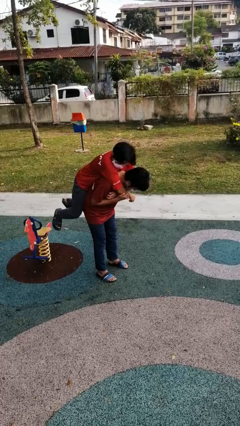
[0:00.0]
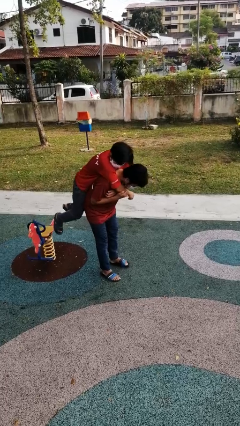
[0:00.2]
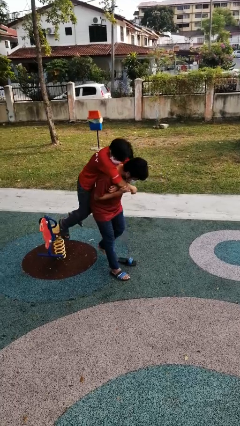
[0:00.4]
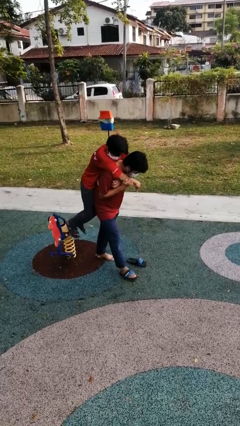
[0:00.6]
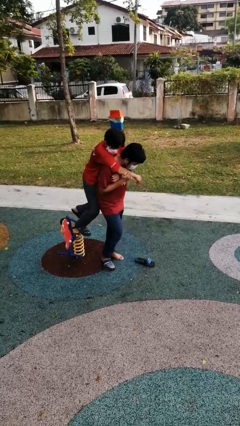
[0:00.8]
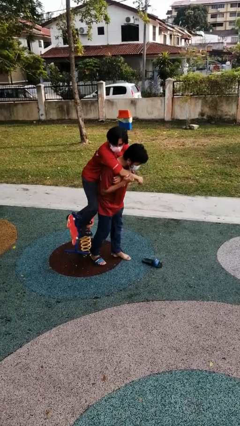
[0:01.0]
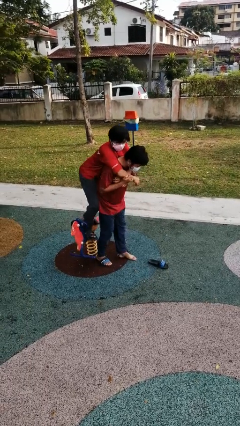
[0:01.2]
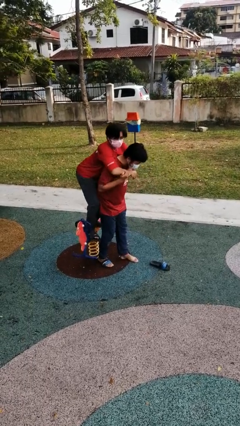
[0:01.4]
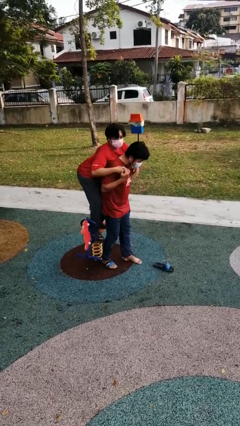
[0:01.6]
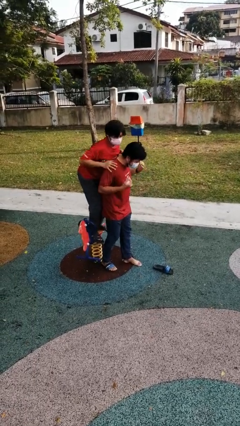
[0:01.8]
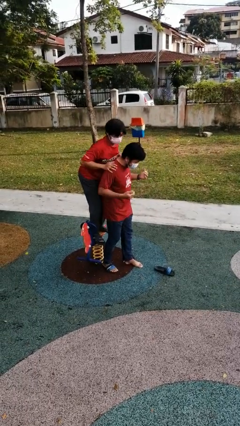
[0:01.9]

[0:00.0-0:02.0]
person puts down person

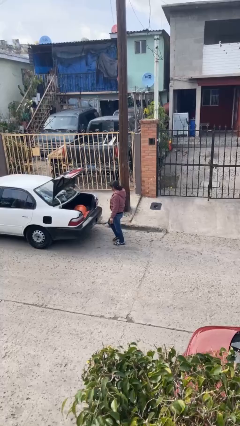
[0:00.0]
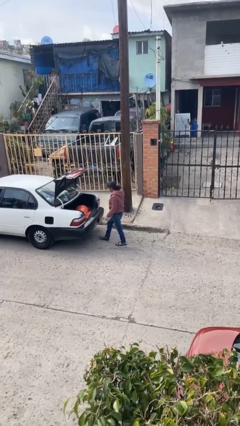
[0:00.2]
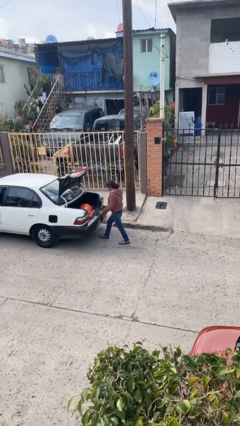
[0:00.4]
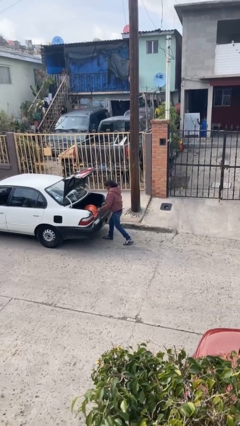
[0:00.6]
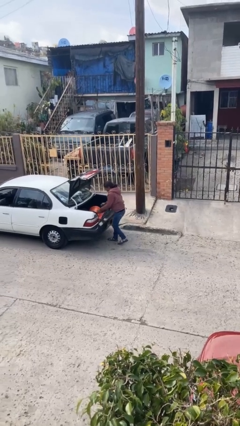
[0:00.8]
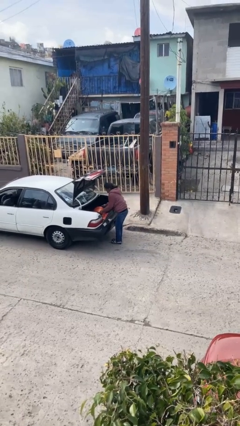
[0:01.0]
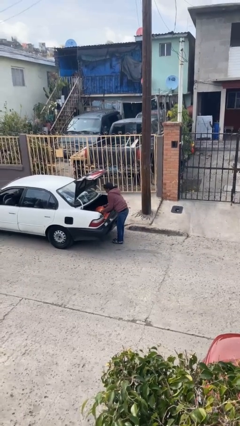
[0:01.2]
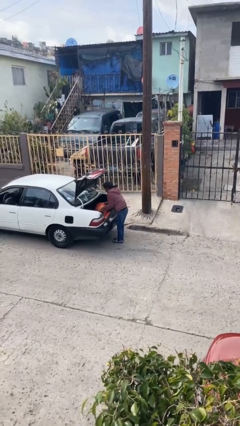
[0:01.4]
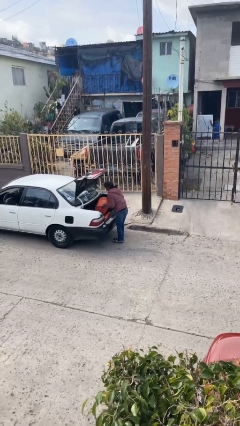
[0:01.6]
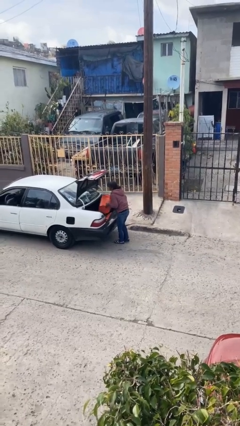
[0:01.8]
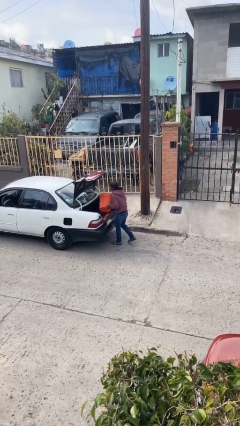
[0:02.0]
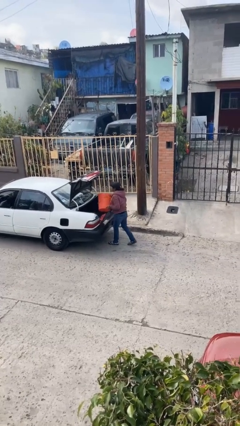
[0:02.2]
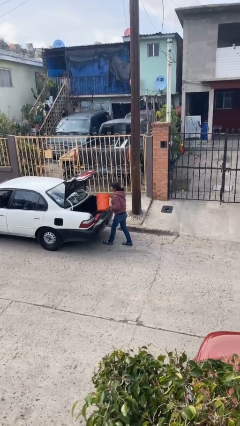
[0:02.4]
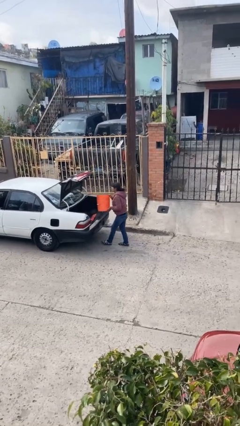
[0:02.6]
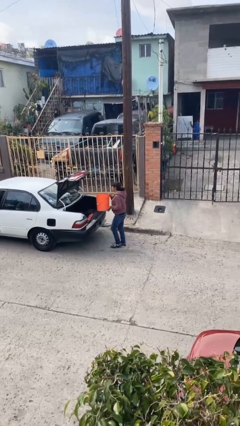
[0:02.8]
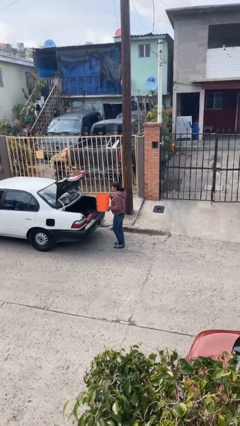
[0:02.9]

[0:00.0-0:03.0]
person unloads car

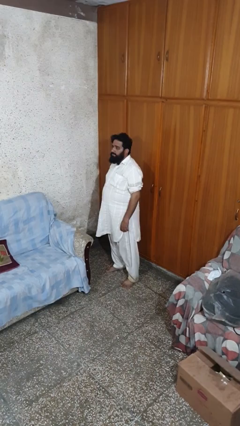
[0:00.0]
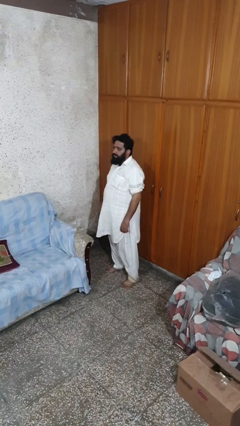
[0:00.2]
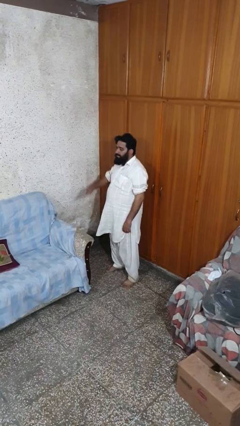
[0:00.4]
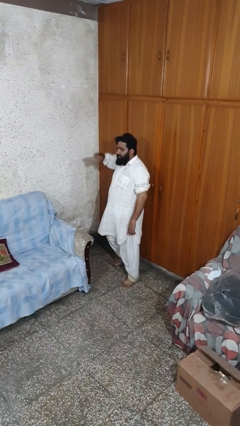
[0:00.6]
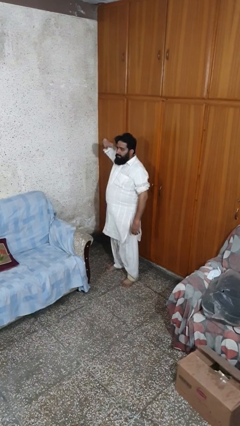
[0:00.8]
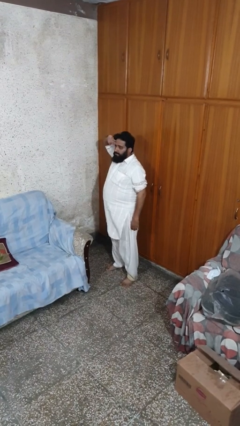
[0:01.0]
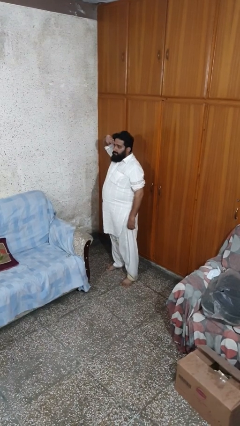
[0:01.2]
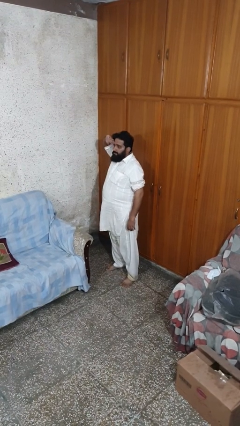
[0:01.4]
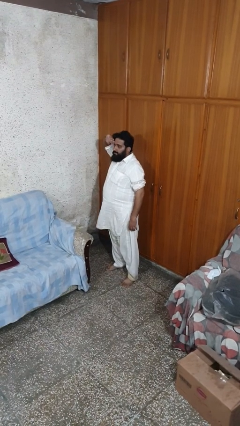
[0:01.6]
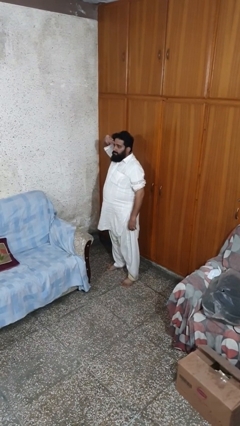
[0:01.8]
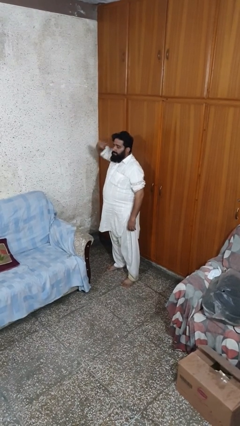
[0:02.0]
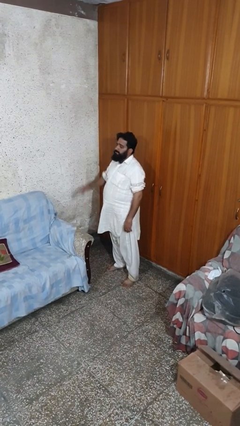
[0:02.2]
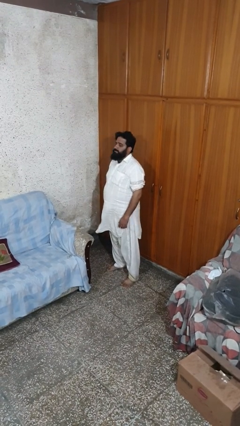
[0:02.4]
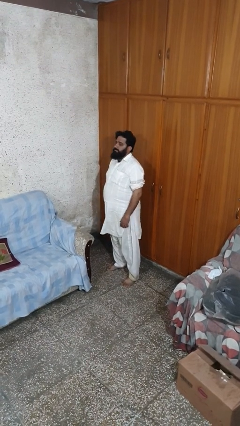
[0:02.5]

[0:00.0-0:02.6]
person salutes

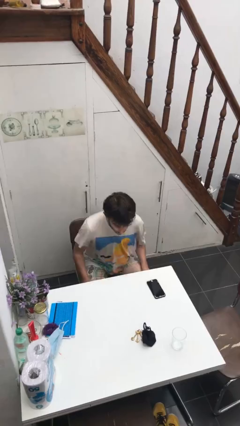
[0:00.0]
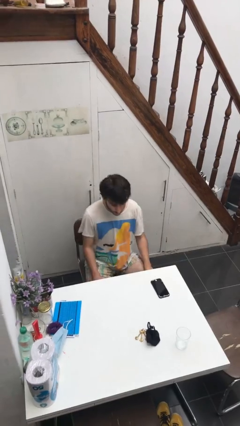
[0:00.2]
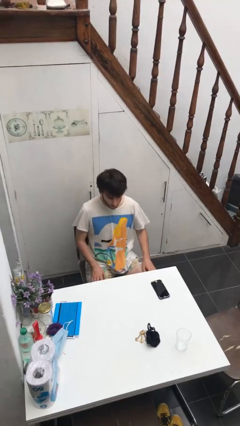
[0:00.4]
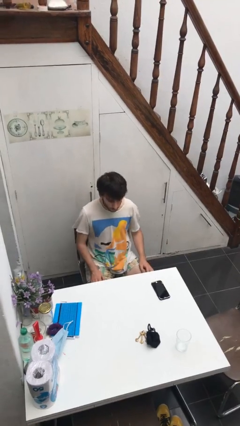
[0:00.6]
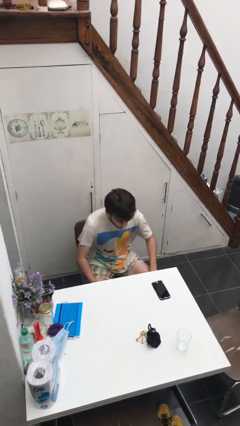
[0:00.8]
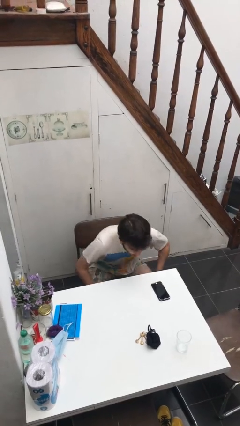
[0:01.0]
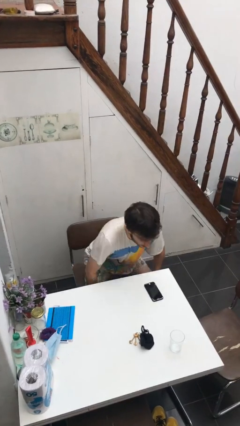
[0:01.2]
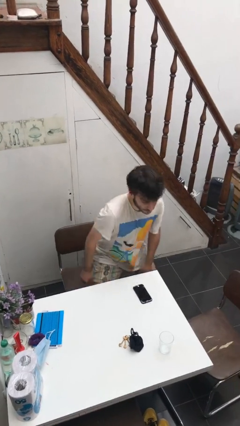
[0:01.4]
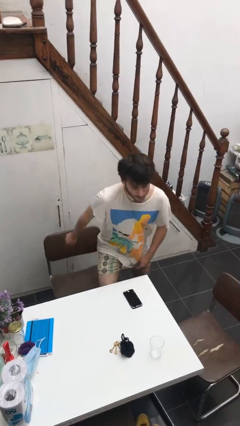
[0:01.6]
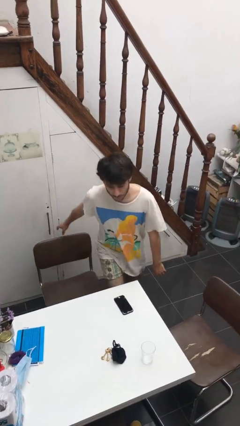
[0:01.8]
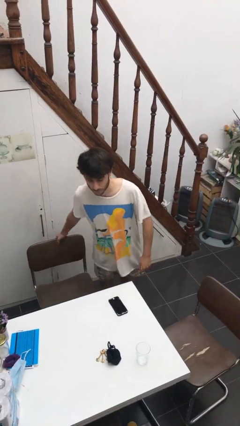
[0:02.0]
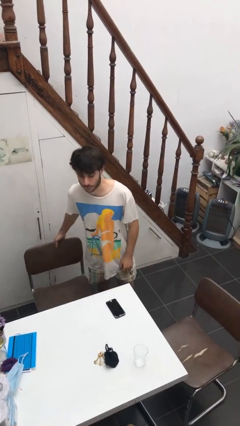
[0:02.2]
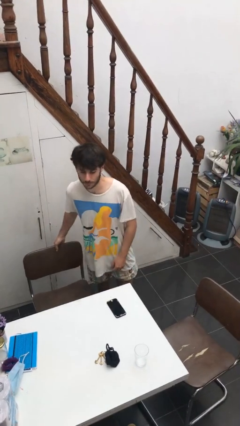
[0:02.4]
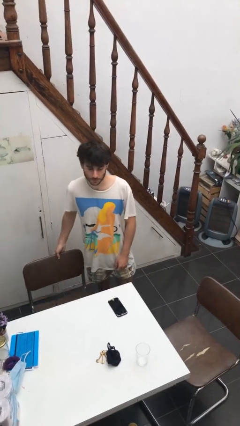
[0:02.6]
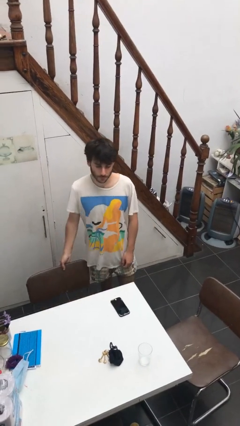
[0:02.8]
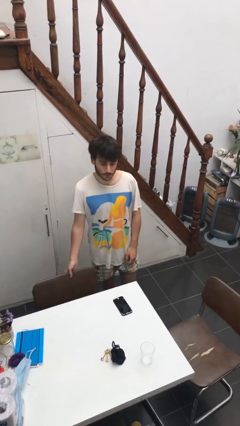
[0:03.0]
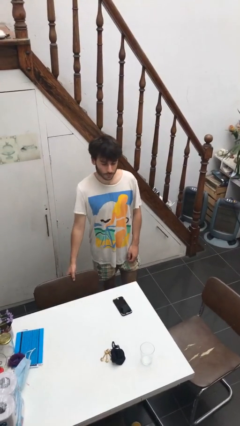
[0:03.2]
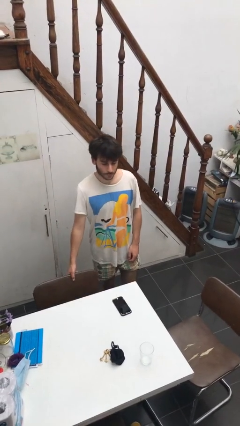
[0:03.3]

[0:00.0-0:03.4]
person stands up

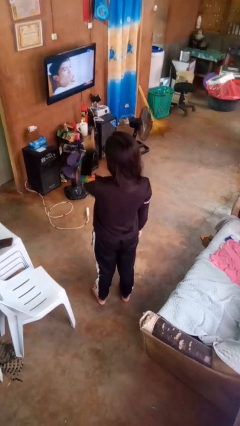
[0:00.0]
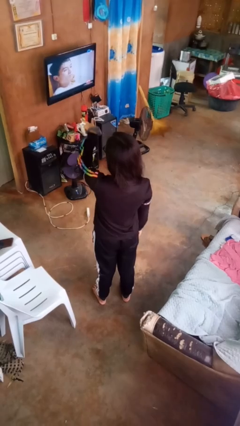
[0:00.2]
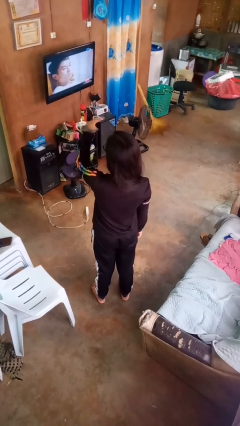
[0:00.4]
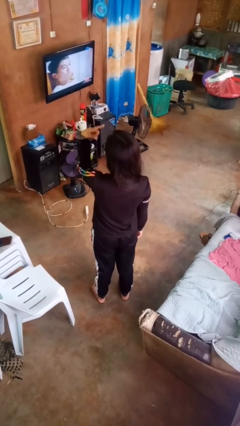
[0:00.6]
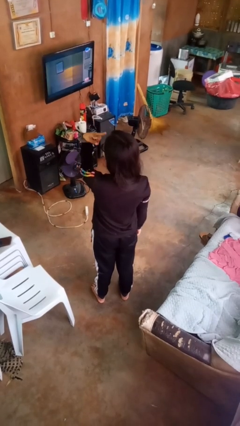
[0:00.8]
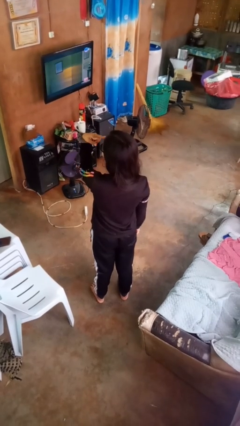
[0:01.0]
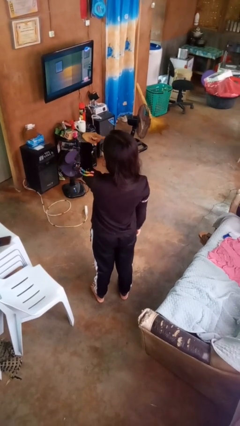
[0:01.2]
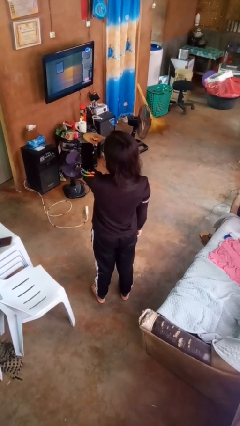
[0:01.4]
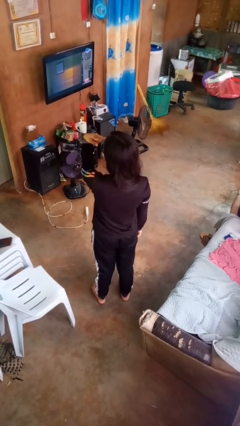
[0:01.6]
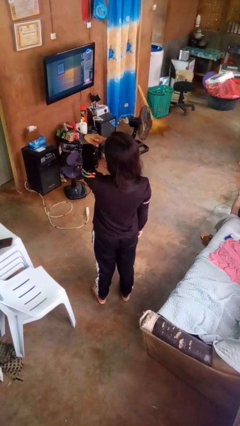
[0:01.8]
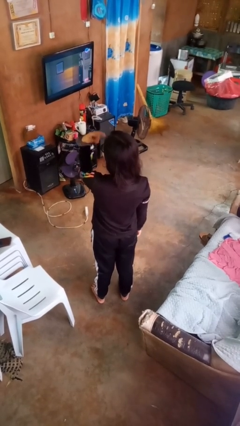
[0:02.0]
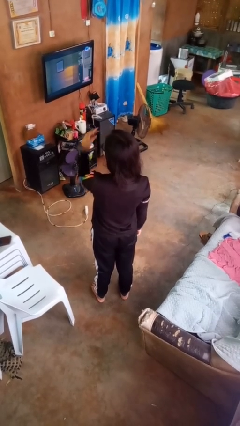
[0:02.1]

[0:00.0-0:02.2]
person gestures watch closely

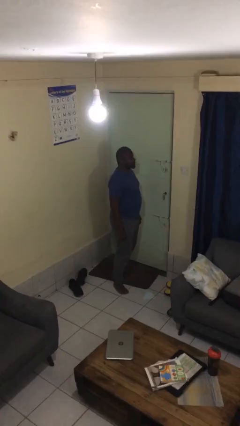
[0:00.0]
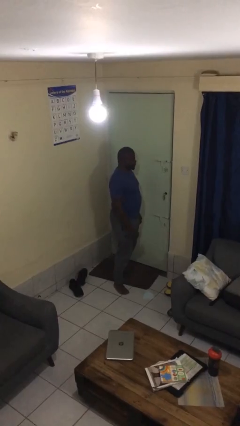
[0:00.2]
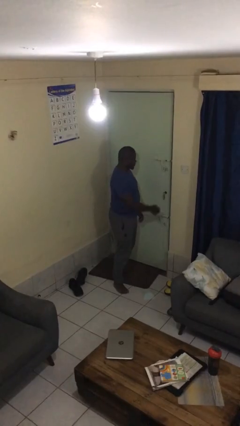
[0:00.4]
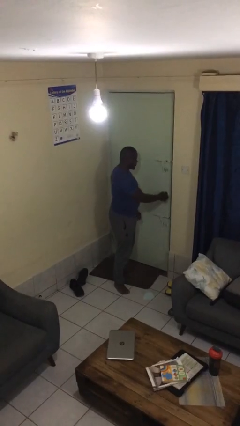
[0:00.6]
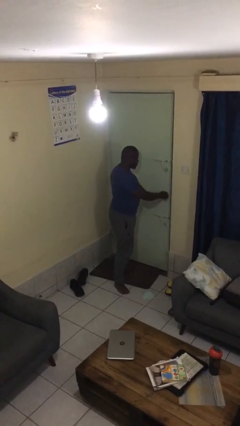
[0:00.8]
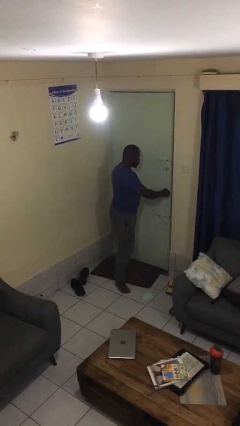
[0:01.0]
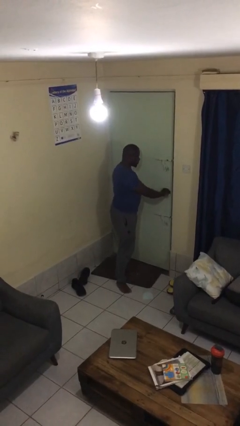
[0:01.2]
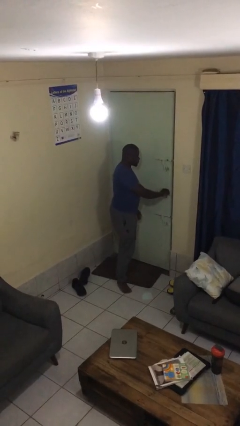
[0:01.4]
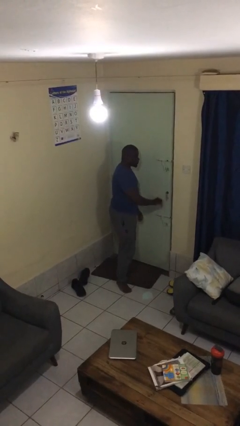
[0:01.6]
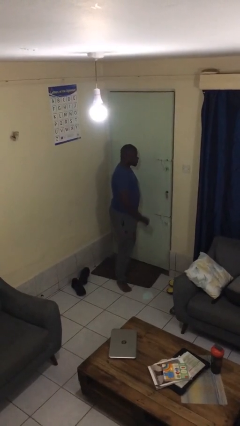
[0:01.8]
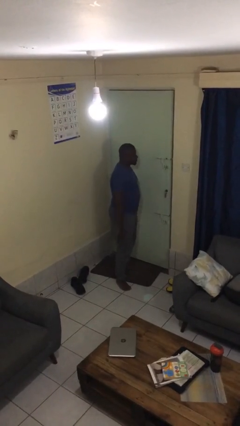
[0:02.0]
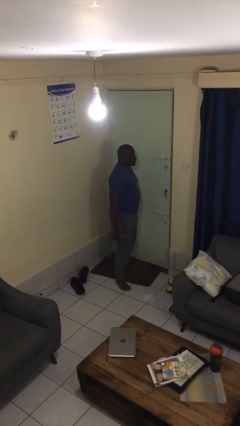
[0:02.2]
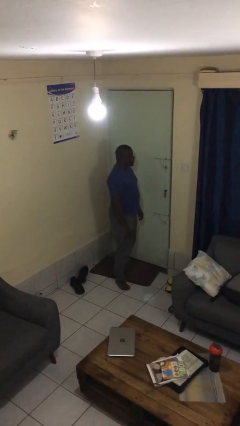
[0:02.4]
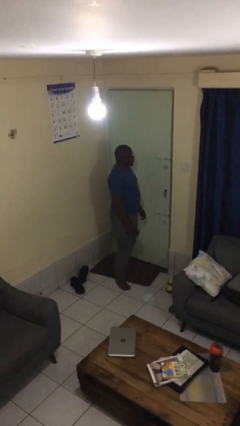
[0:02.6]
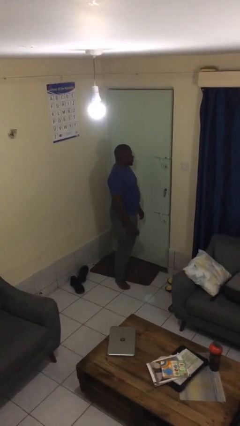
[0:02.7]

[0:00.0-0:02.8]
person unlocks door with keys

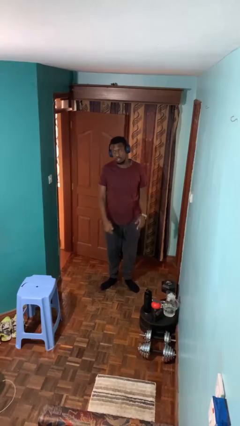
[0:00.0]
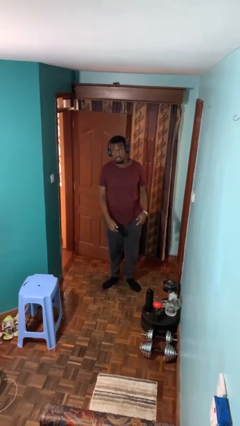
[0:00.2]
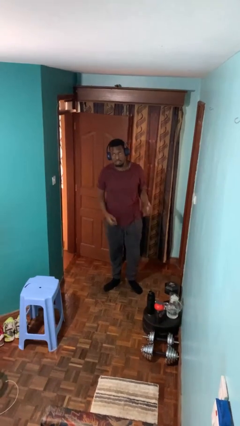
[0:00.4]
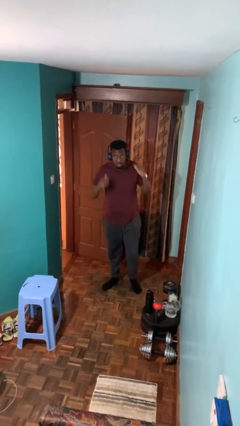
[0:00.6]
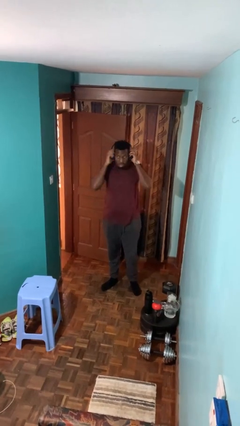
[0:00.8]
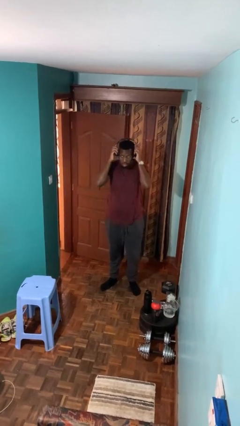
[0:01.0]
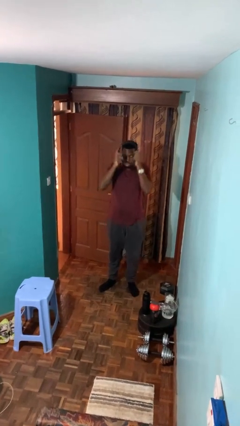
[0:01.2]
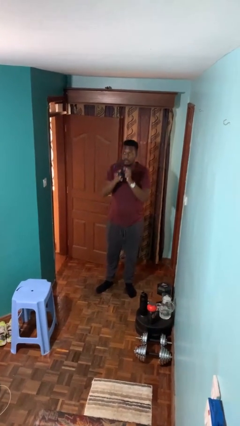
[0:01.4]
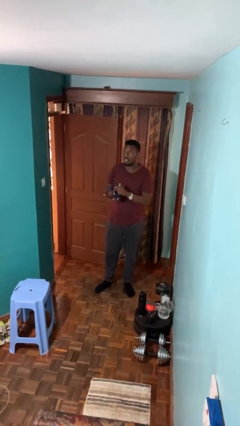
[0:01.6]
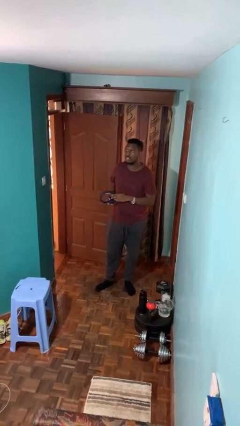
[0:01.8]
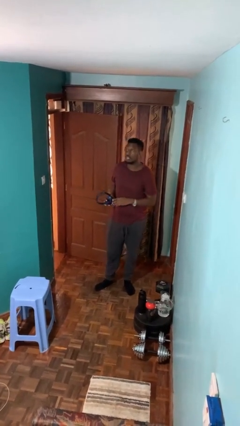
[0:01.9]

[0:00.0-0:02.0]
person takes off headphones
